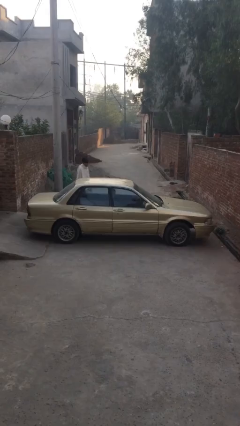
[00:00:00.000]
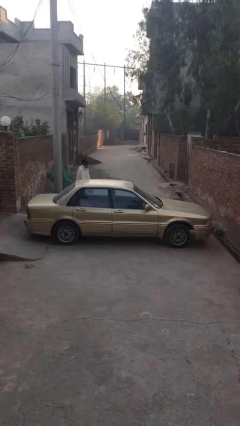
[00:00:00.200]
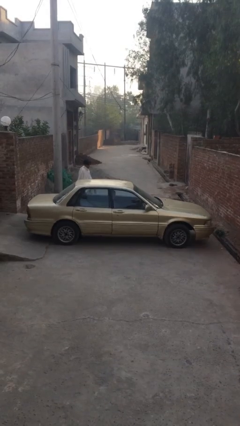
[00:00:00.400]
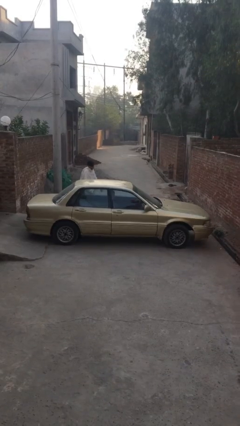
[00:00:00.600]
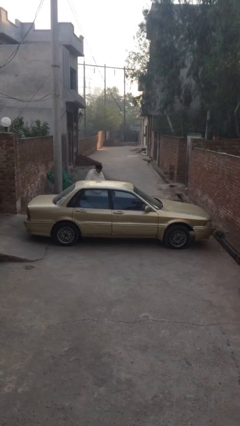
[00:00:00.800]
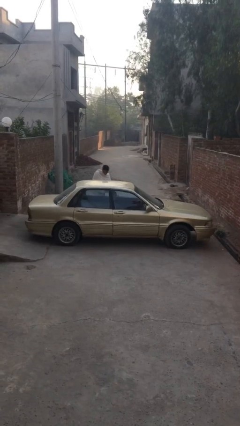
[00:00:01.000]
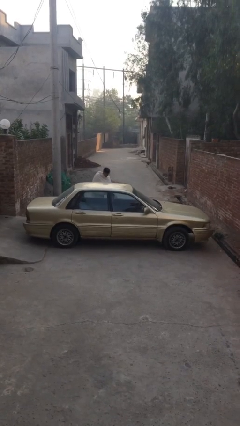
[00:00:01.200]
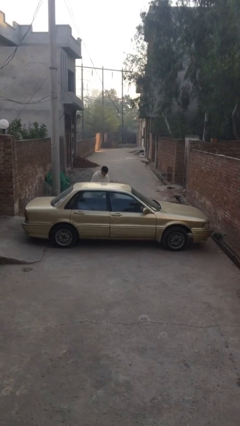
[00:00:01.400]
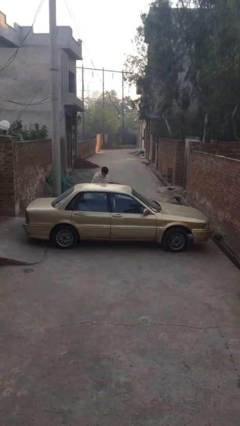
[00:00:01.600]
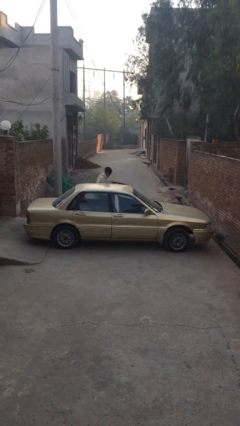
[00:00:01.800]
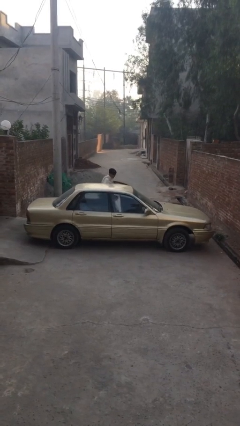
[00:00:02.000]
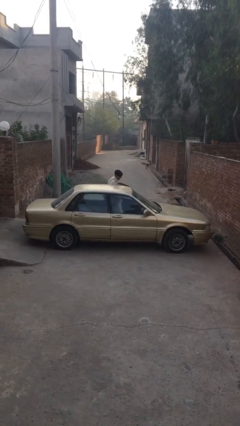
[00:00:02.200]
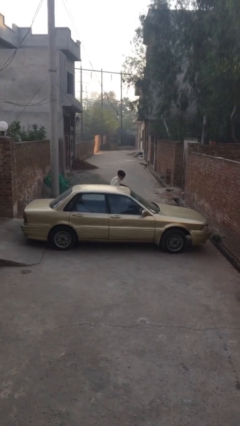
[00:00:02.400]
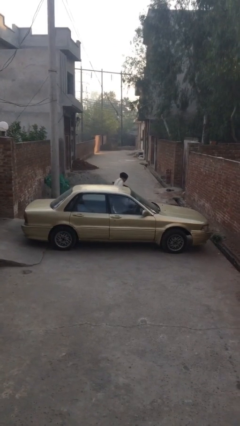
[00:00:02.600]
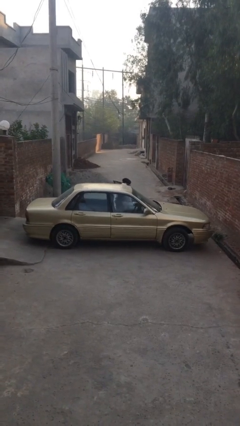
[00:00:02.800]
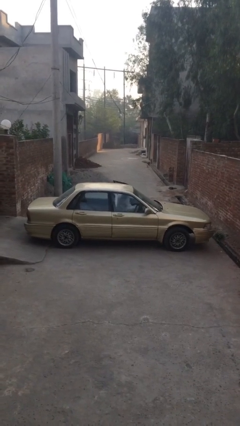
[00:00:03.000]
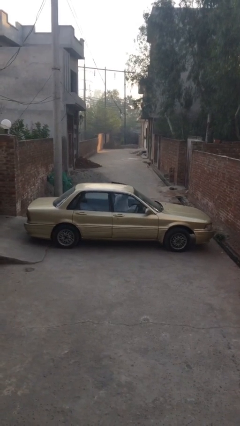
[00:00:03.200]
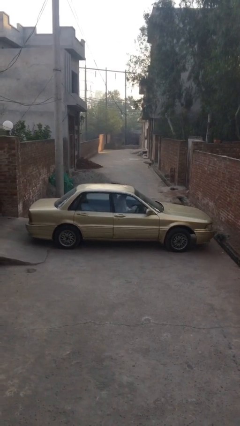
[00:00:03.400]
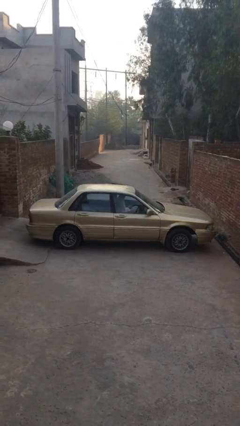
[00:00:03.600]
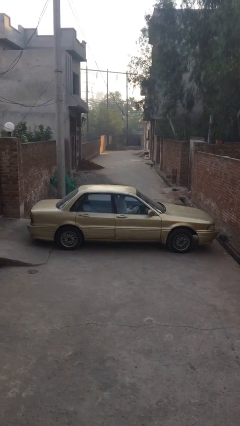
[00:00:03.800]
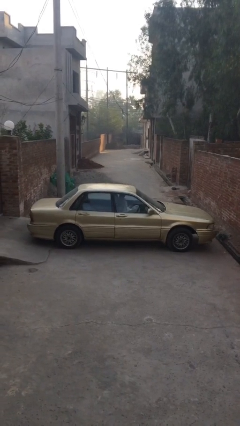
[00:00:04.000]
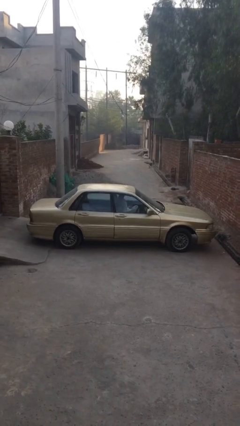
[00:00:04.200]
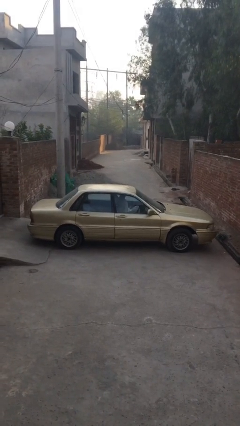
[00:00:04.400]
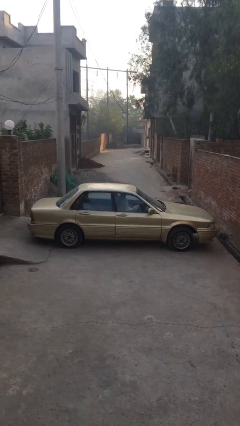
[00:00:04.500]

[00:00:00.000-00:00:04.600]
car picks up person

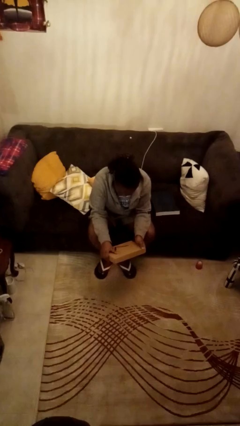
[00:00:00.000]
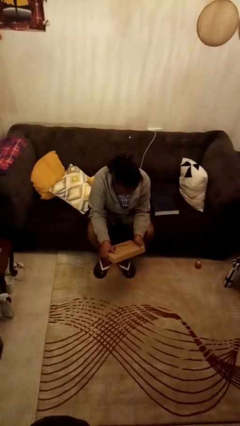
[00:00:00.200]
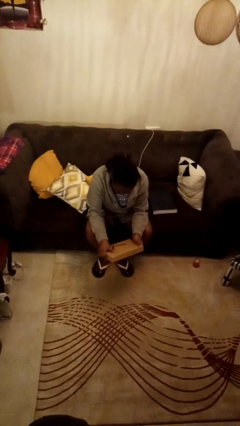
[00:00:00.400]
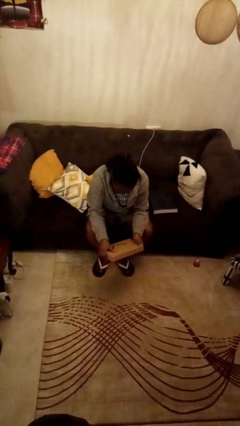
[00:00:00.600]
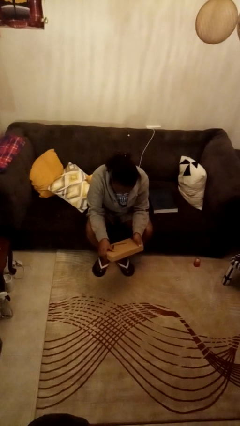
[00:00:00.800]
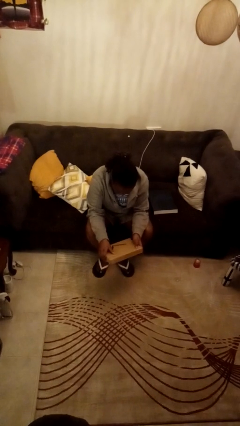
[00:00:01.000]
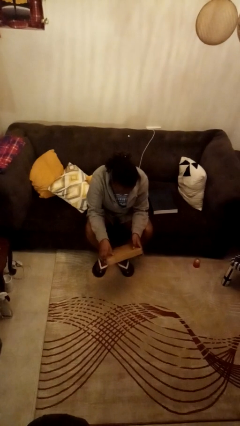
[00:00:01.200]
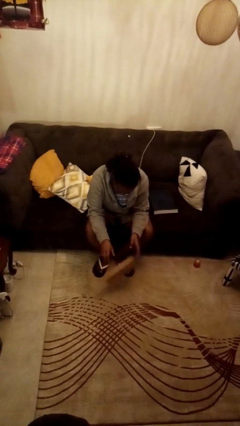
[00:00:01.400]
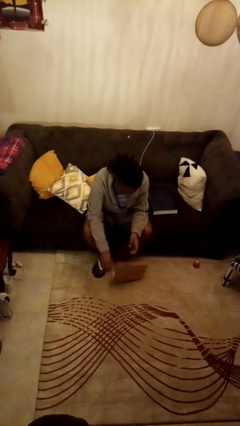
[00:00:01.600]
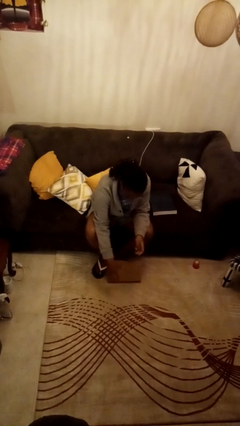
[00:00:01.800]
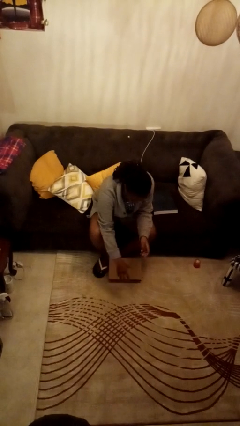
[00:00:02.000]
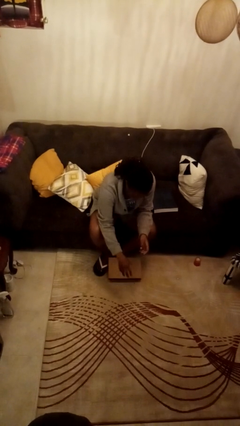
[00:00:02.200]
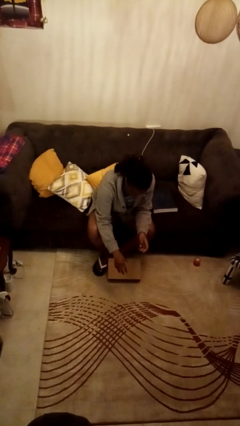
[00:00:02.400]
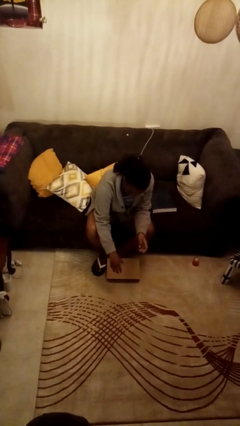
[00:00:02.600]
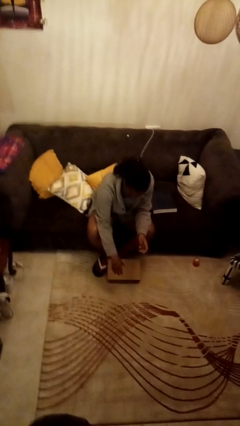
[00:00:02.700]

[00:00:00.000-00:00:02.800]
person drops object

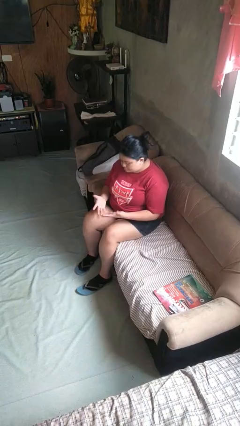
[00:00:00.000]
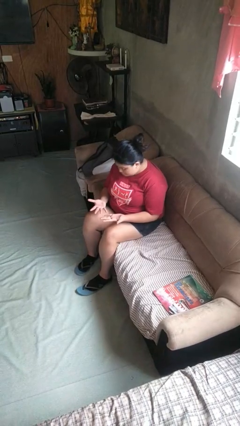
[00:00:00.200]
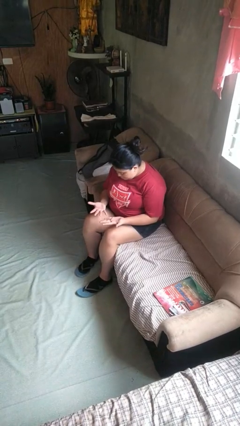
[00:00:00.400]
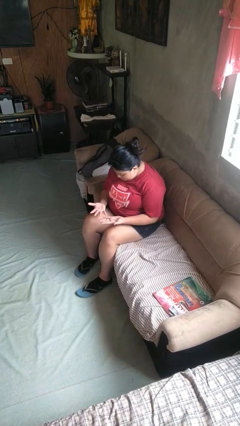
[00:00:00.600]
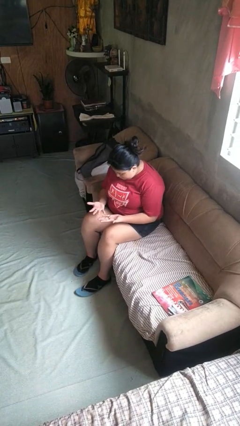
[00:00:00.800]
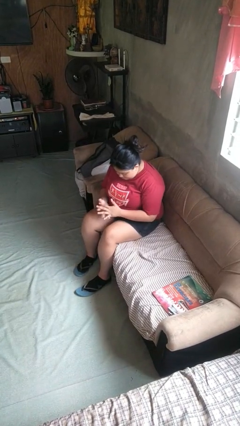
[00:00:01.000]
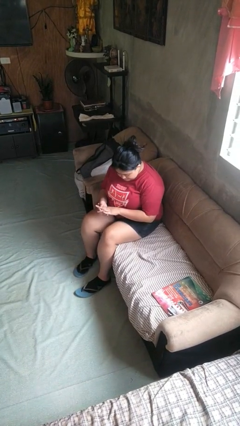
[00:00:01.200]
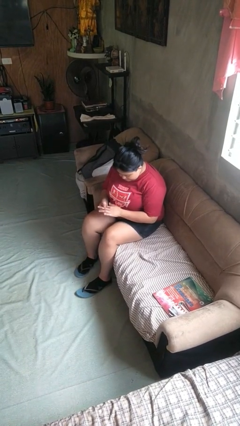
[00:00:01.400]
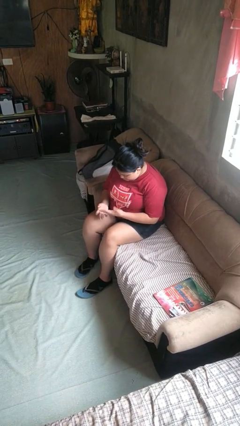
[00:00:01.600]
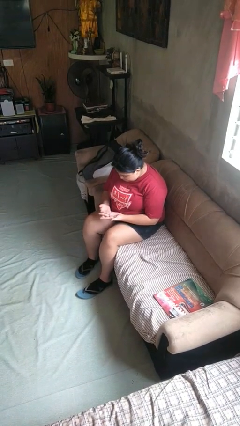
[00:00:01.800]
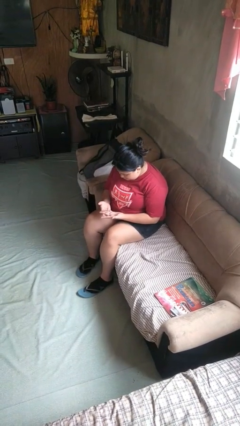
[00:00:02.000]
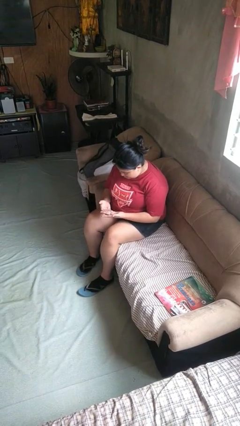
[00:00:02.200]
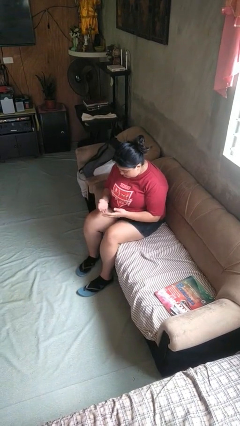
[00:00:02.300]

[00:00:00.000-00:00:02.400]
person looks at hands in lap

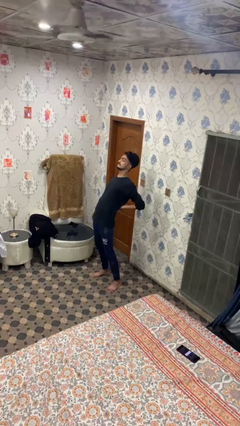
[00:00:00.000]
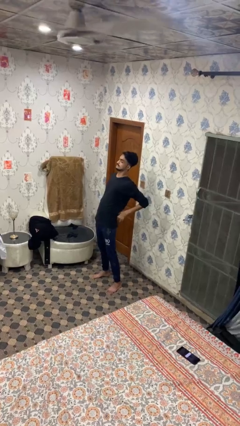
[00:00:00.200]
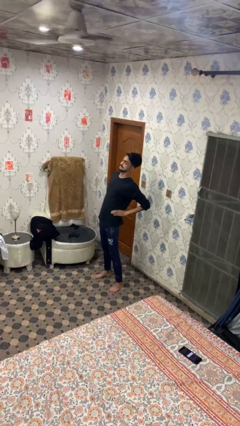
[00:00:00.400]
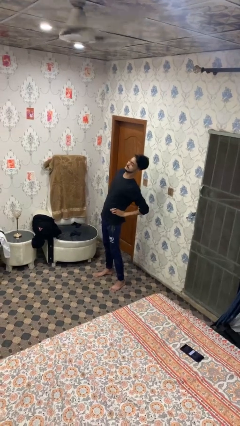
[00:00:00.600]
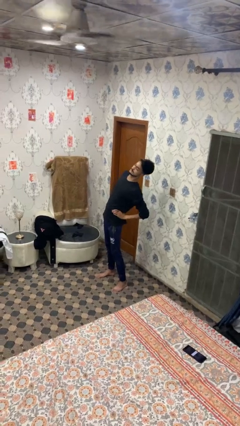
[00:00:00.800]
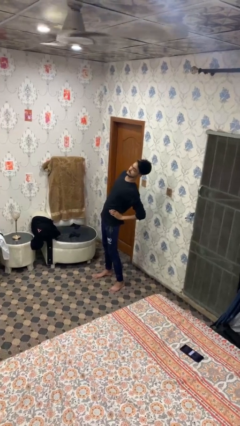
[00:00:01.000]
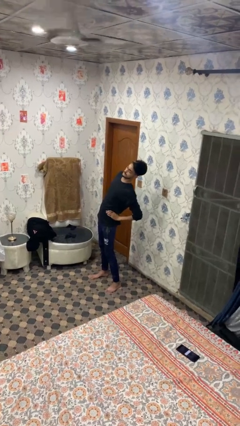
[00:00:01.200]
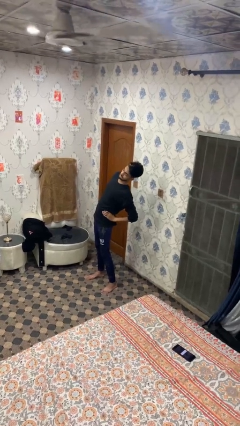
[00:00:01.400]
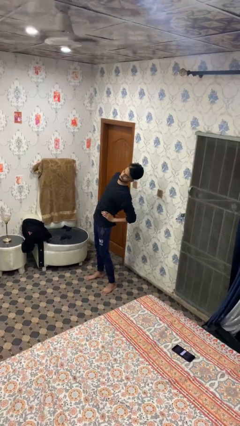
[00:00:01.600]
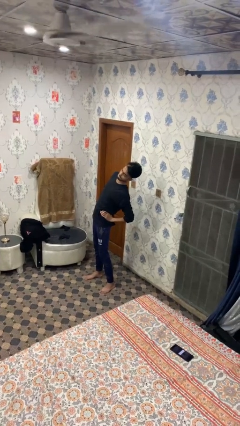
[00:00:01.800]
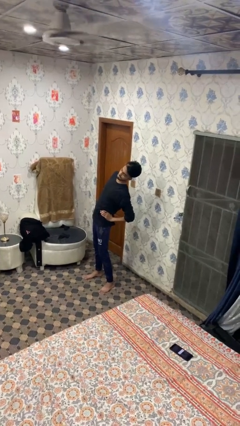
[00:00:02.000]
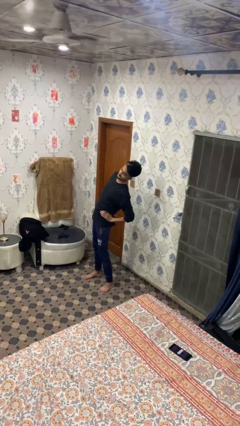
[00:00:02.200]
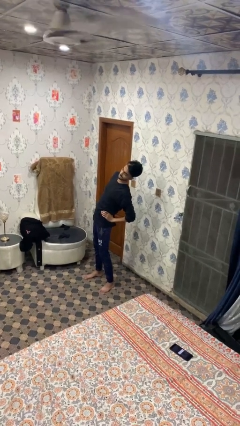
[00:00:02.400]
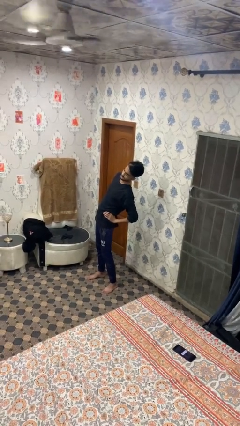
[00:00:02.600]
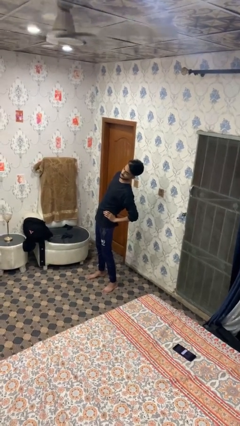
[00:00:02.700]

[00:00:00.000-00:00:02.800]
person stretches arms to side

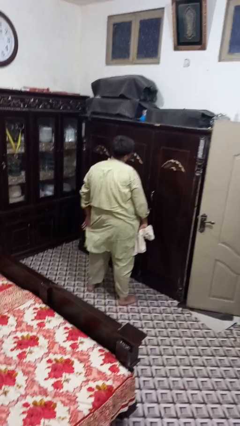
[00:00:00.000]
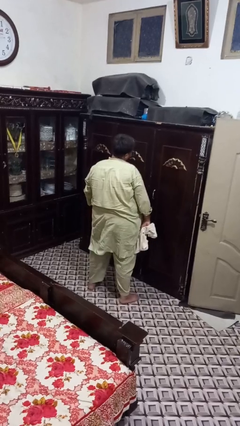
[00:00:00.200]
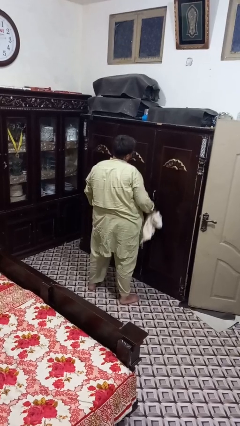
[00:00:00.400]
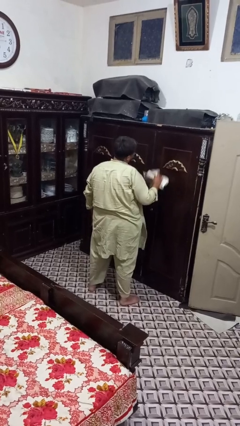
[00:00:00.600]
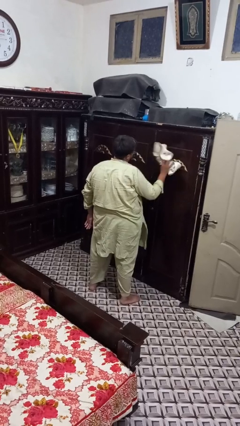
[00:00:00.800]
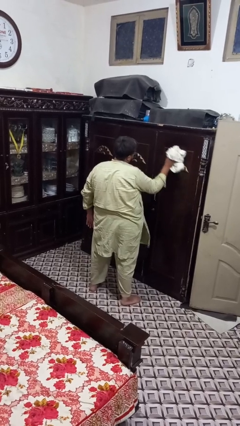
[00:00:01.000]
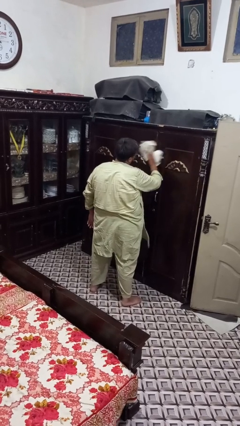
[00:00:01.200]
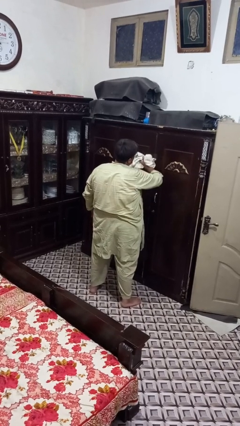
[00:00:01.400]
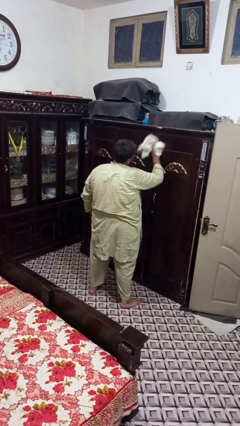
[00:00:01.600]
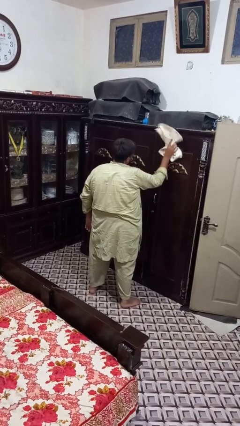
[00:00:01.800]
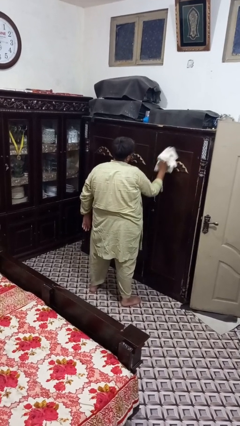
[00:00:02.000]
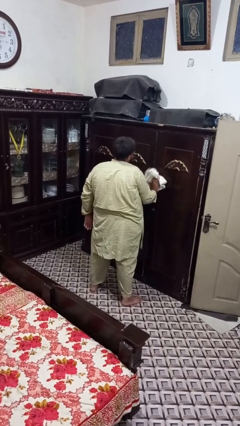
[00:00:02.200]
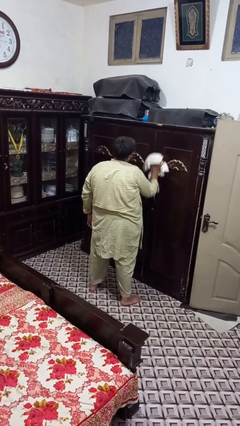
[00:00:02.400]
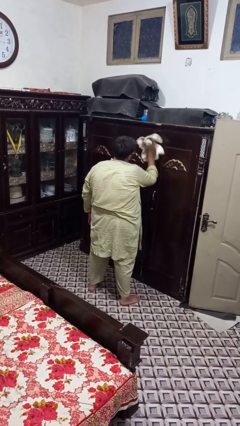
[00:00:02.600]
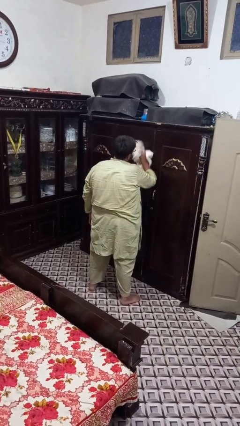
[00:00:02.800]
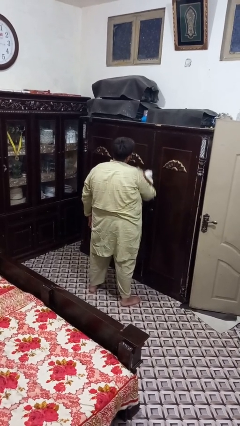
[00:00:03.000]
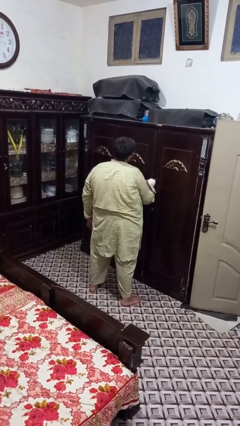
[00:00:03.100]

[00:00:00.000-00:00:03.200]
person dusts furniture

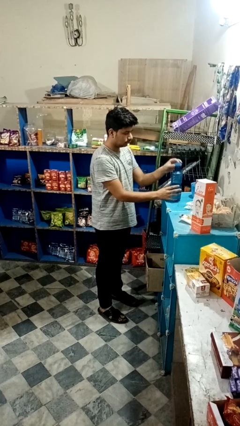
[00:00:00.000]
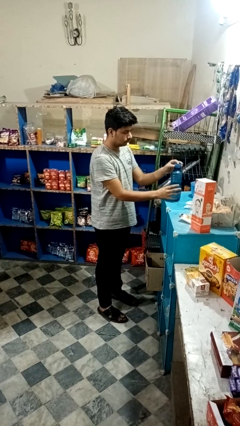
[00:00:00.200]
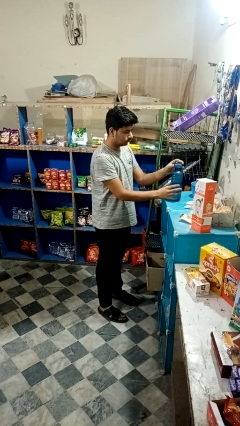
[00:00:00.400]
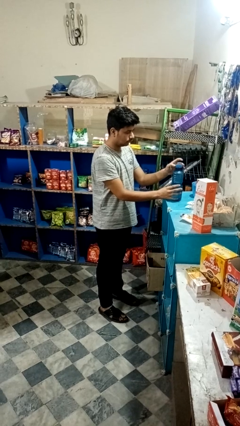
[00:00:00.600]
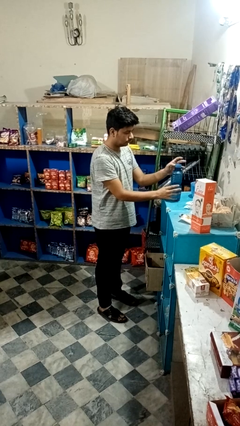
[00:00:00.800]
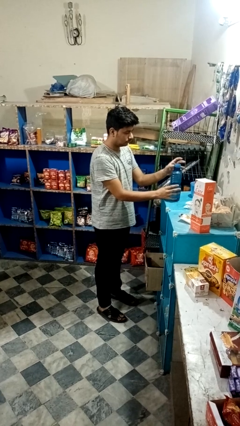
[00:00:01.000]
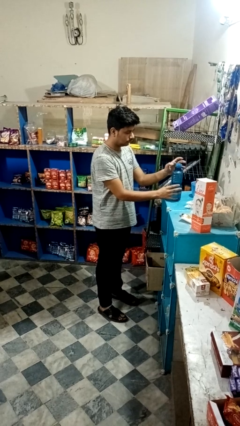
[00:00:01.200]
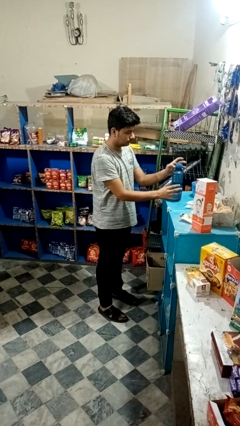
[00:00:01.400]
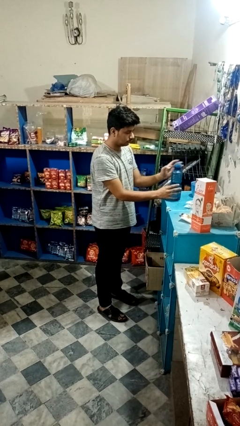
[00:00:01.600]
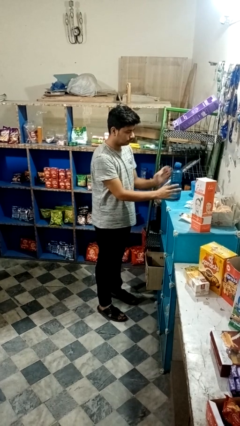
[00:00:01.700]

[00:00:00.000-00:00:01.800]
person screws lid to bottle
